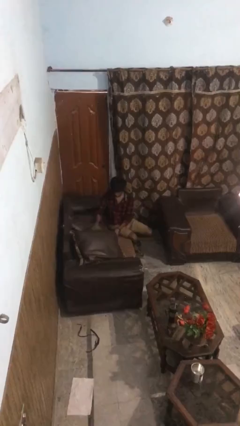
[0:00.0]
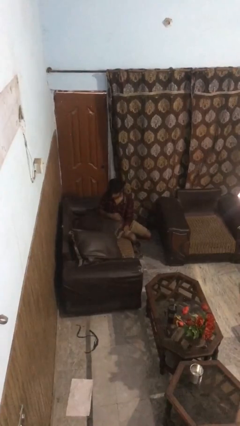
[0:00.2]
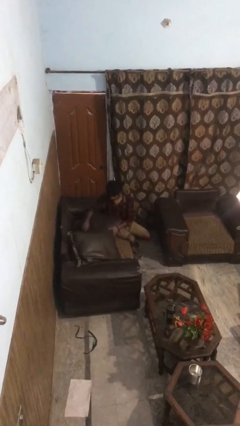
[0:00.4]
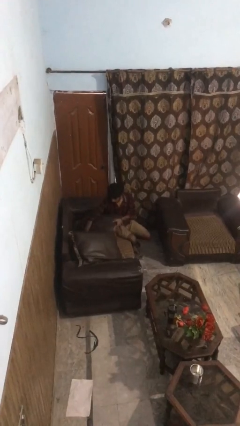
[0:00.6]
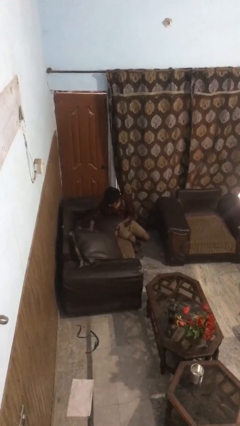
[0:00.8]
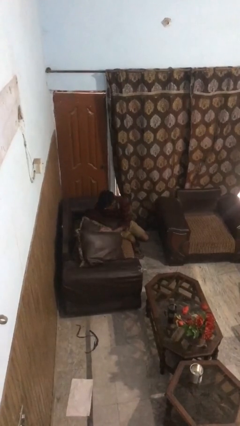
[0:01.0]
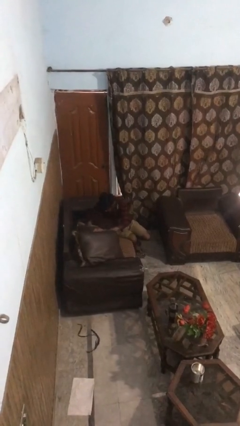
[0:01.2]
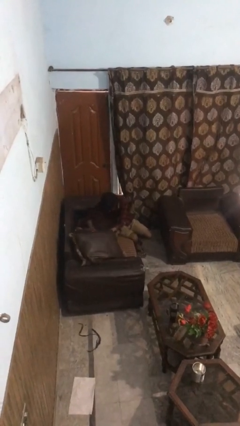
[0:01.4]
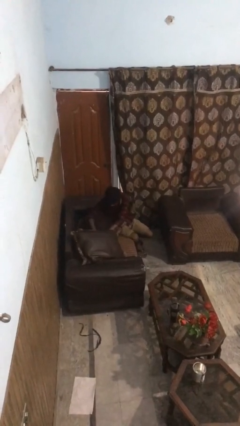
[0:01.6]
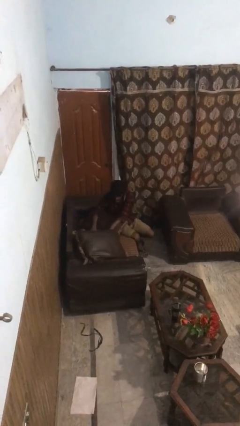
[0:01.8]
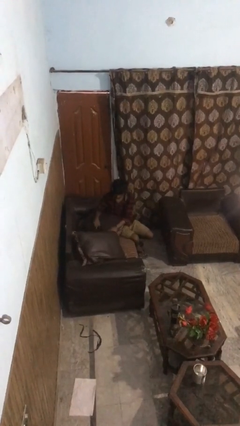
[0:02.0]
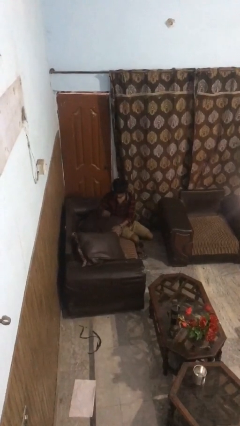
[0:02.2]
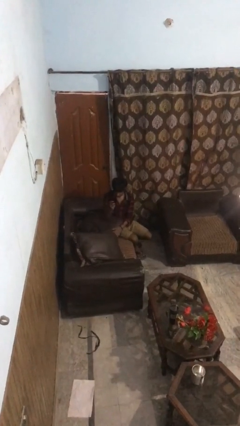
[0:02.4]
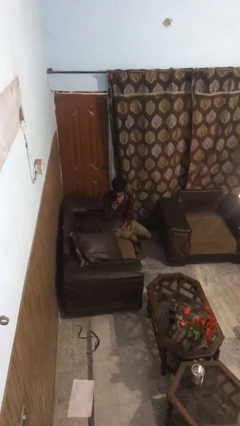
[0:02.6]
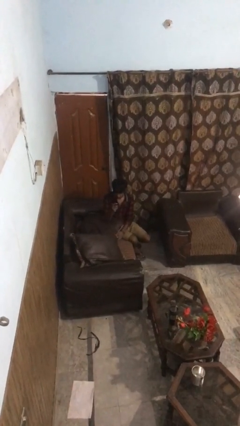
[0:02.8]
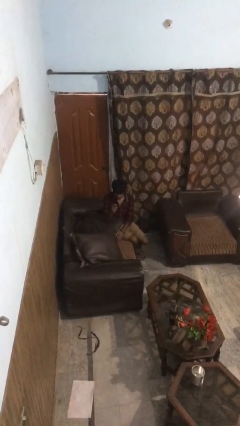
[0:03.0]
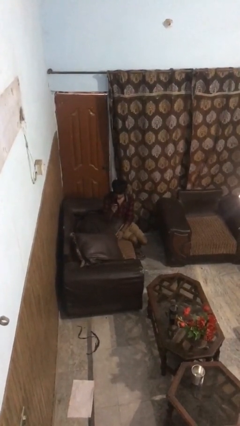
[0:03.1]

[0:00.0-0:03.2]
person searches in couch

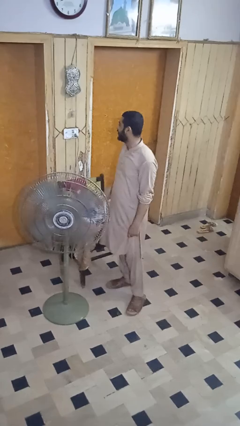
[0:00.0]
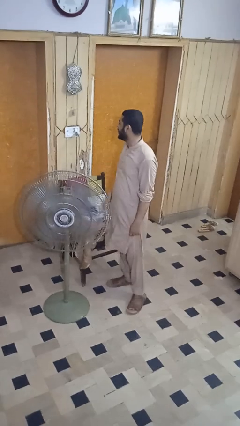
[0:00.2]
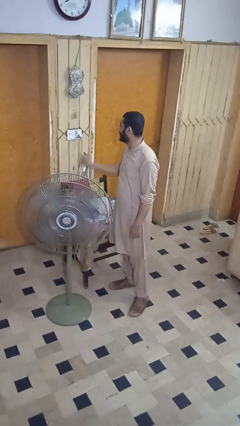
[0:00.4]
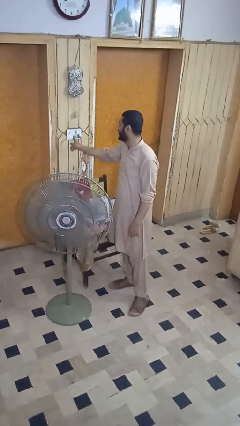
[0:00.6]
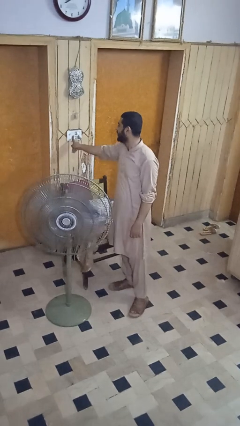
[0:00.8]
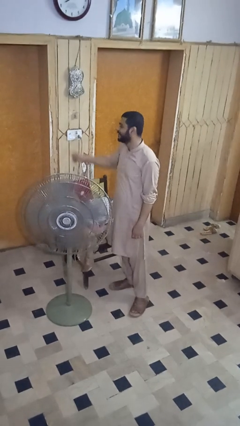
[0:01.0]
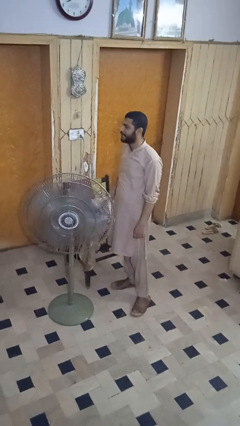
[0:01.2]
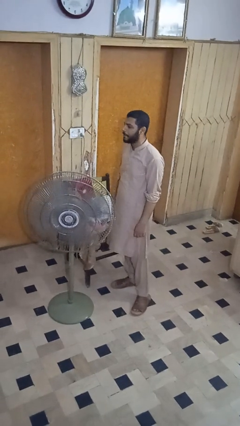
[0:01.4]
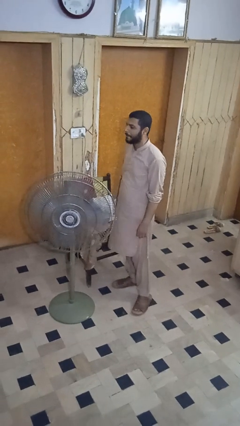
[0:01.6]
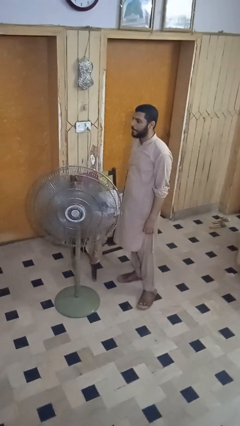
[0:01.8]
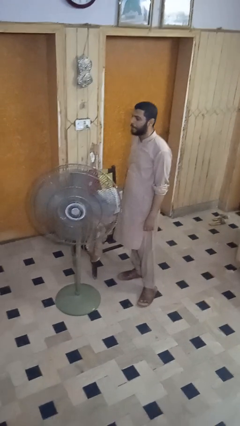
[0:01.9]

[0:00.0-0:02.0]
person turns off fan

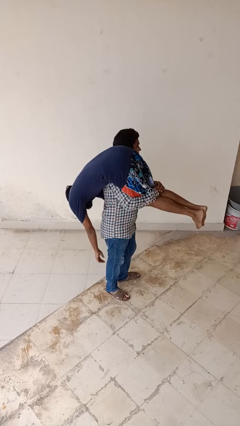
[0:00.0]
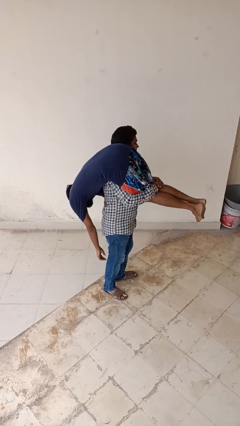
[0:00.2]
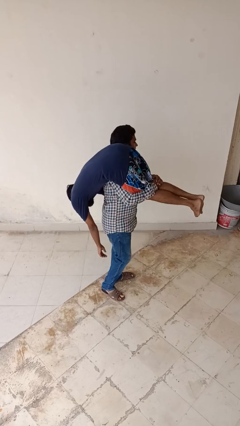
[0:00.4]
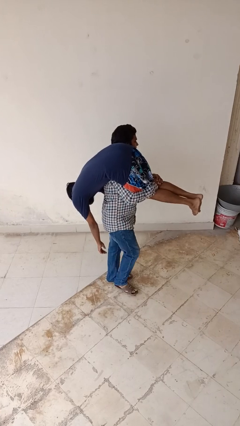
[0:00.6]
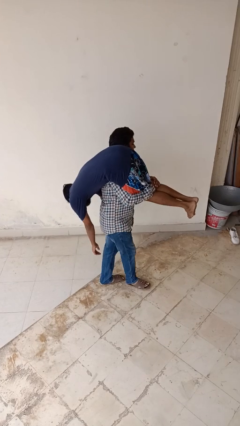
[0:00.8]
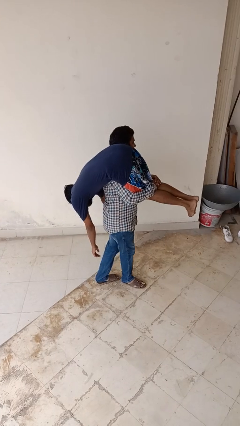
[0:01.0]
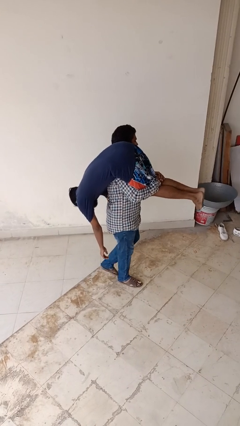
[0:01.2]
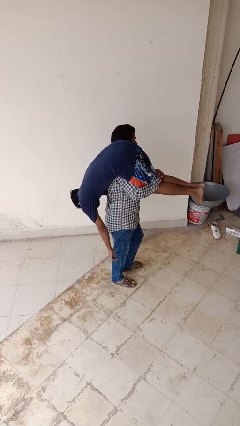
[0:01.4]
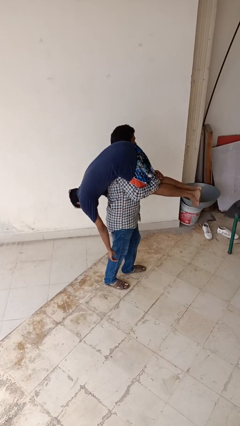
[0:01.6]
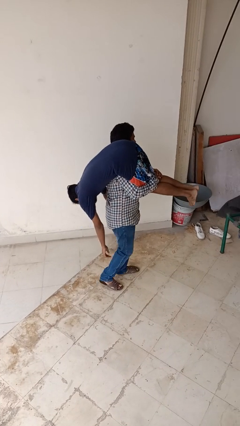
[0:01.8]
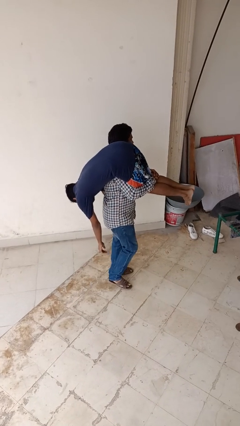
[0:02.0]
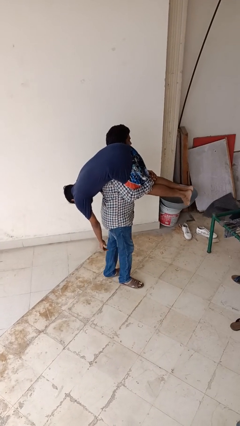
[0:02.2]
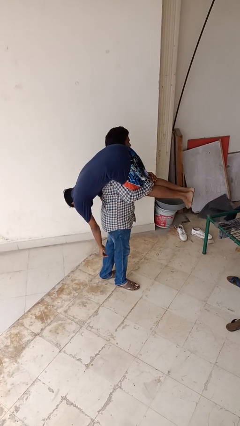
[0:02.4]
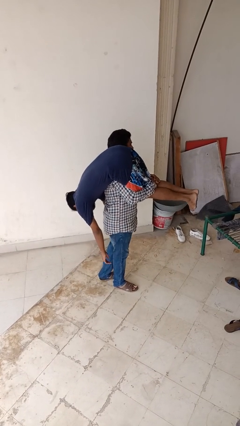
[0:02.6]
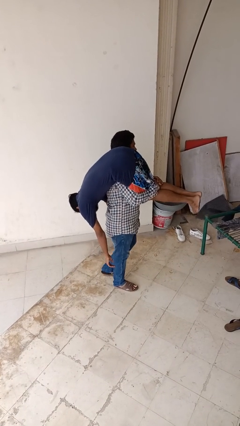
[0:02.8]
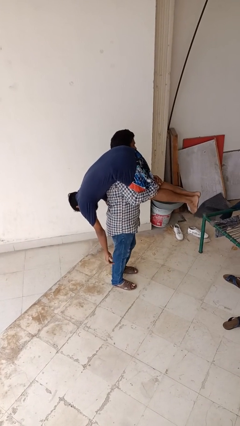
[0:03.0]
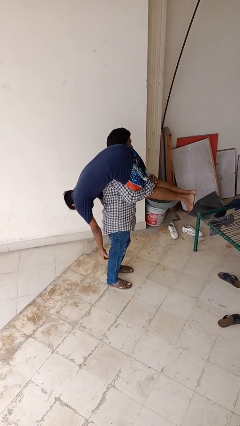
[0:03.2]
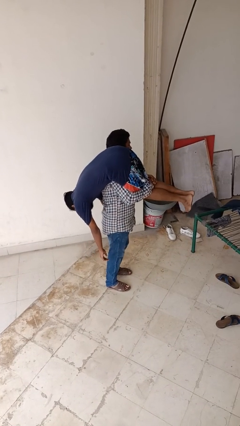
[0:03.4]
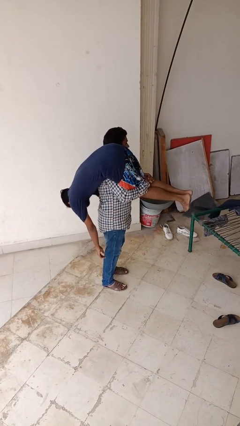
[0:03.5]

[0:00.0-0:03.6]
person carries person on shoulders

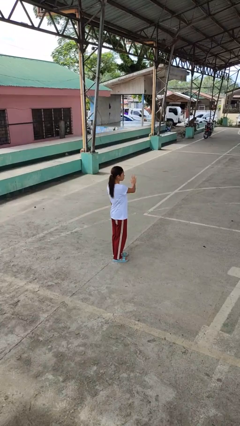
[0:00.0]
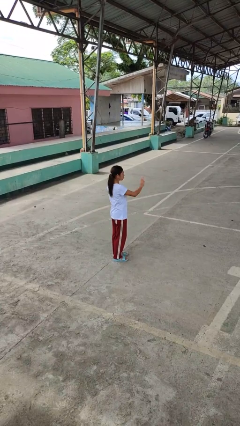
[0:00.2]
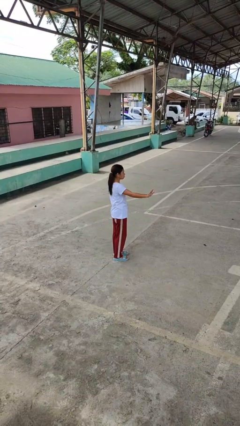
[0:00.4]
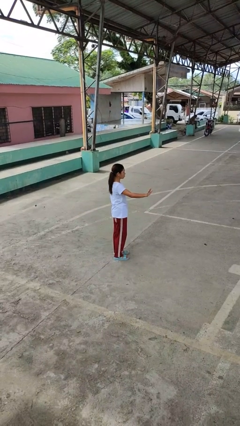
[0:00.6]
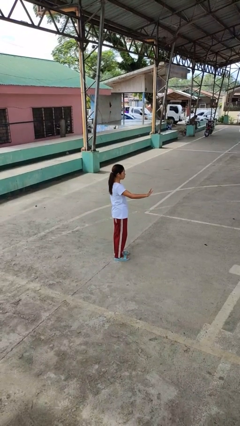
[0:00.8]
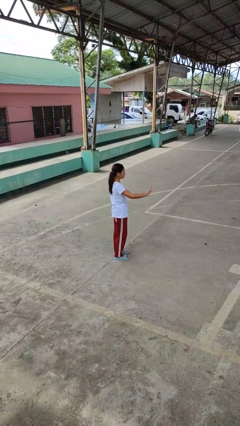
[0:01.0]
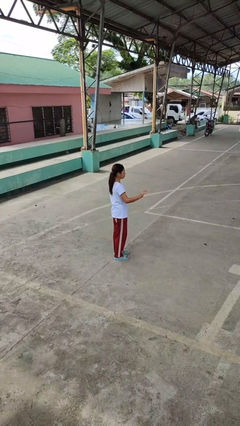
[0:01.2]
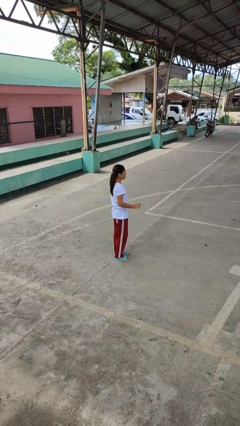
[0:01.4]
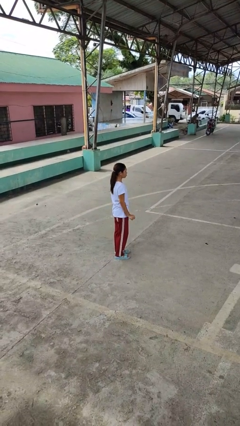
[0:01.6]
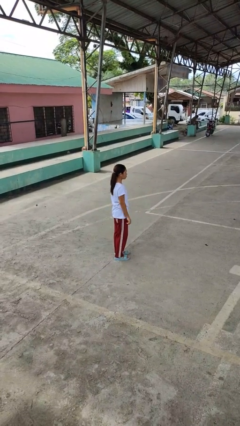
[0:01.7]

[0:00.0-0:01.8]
person gestures swipe right

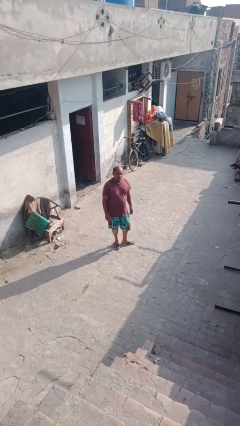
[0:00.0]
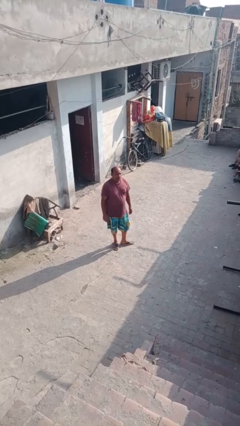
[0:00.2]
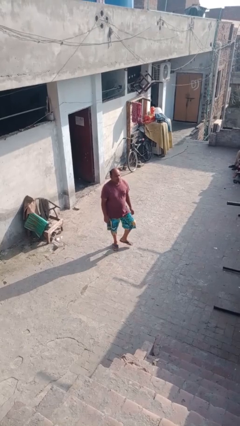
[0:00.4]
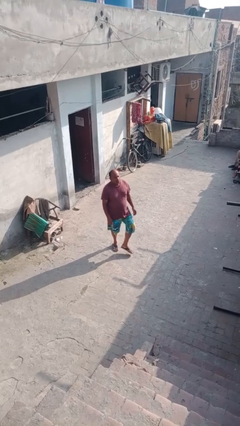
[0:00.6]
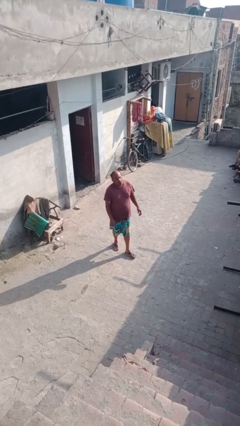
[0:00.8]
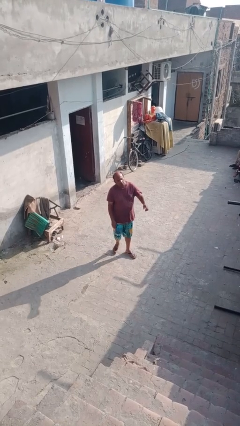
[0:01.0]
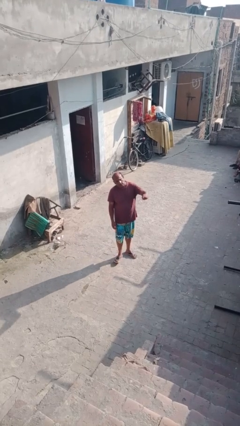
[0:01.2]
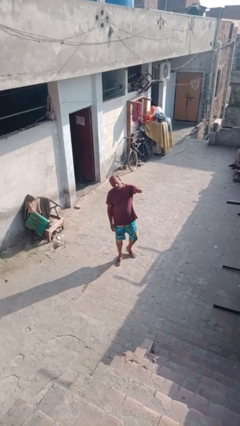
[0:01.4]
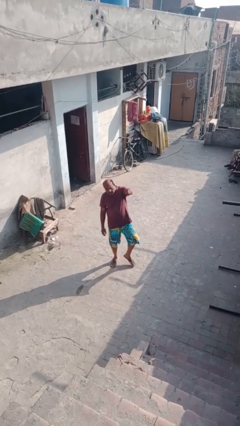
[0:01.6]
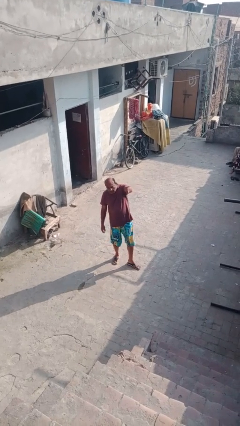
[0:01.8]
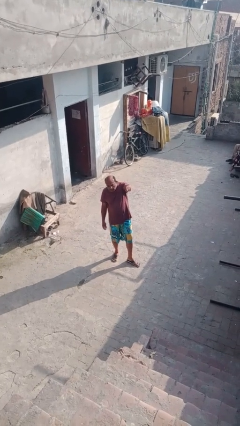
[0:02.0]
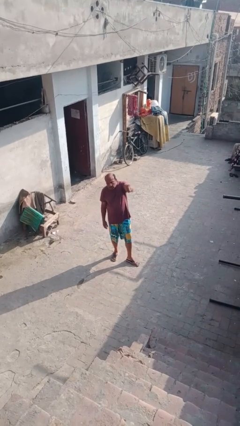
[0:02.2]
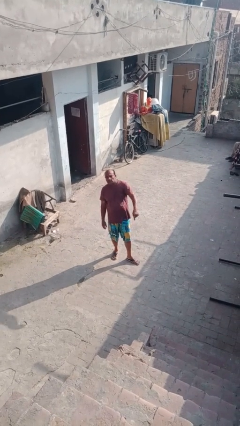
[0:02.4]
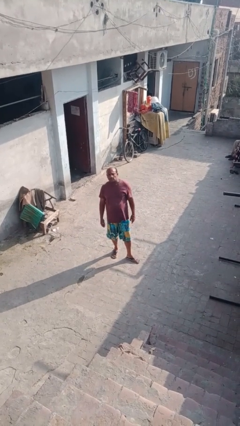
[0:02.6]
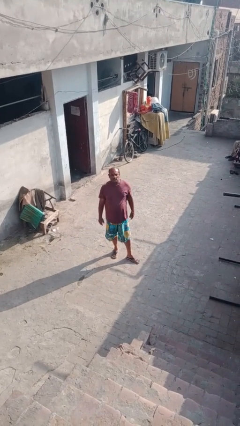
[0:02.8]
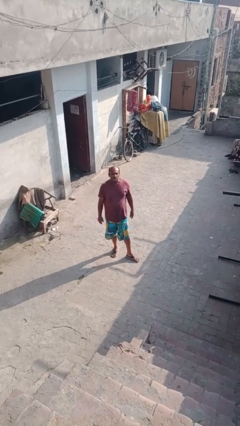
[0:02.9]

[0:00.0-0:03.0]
person points at person

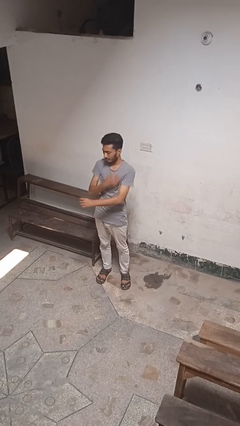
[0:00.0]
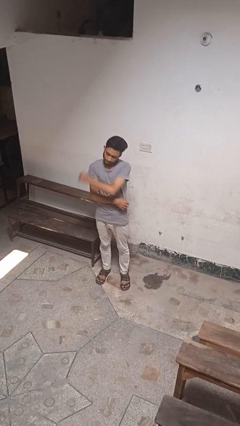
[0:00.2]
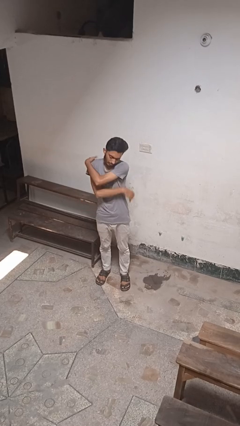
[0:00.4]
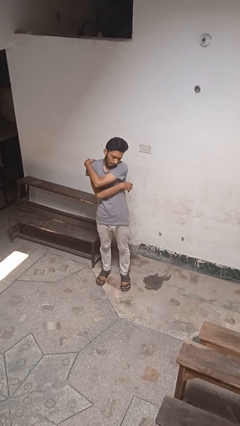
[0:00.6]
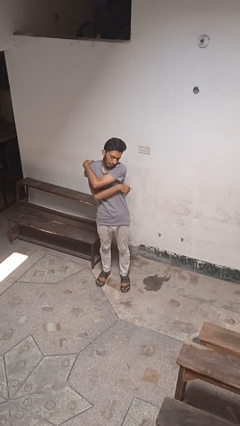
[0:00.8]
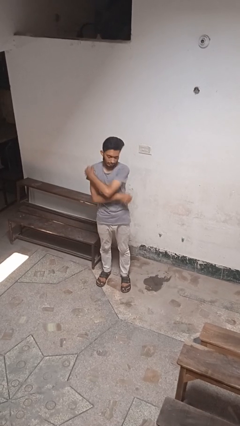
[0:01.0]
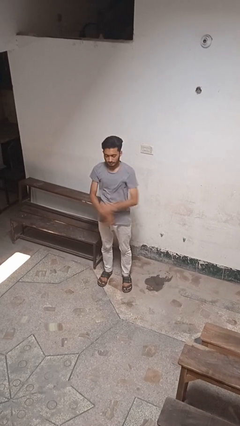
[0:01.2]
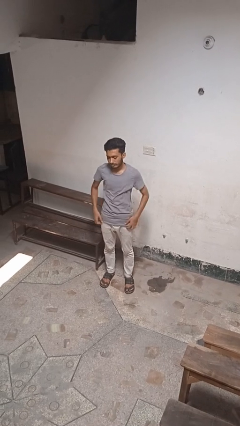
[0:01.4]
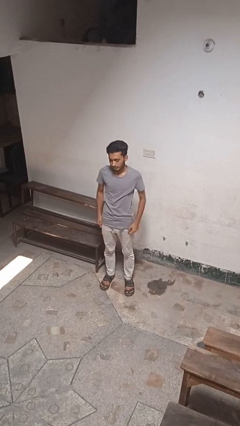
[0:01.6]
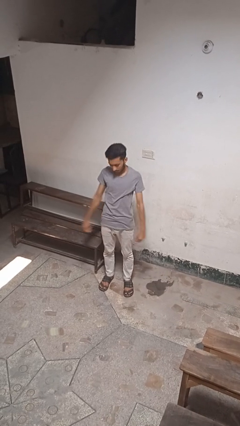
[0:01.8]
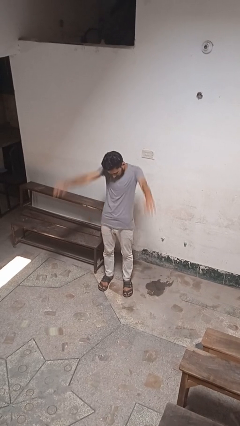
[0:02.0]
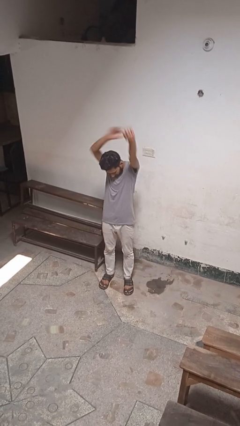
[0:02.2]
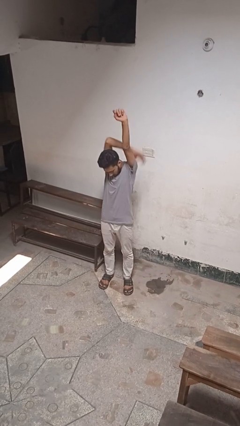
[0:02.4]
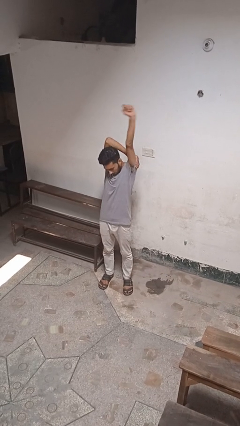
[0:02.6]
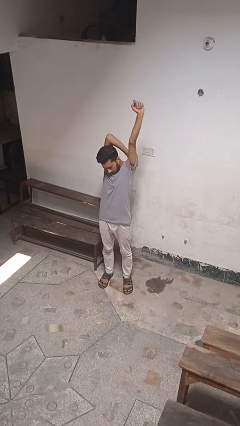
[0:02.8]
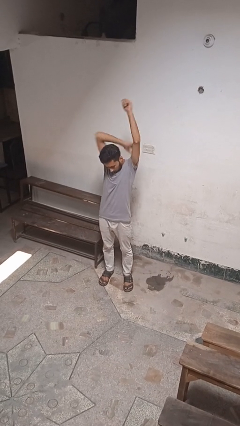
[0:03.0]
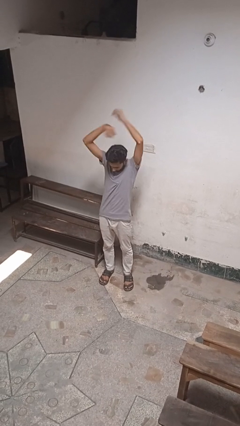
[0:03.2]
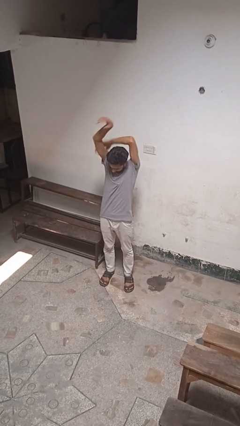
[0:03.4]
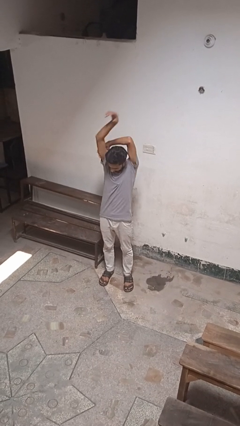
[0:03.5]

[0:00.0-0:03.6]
person puts feet up
